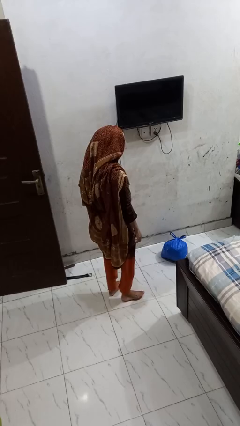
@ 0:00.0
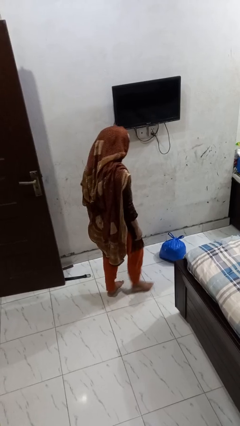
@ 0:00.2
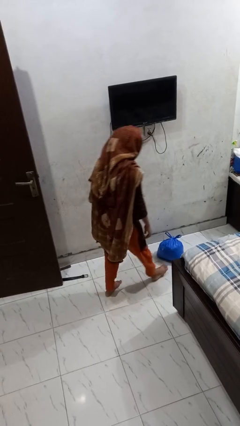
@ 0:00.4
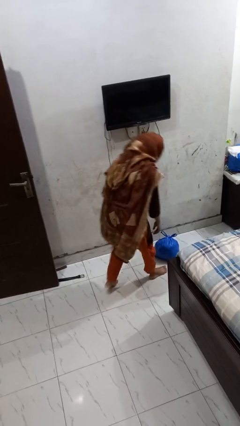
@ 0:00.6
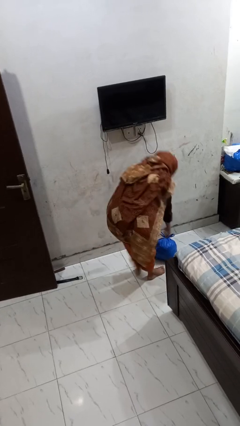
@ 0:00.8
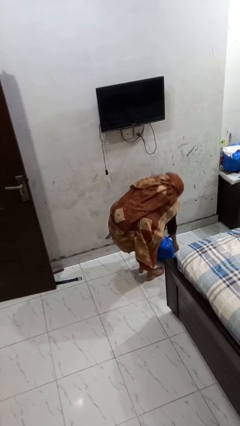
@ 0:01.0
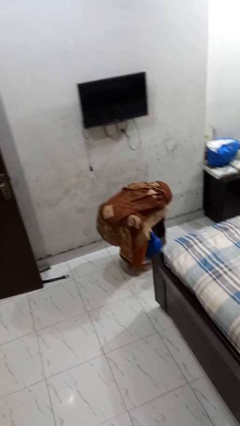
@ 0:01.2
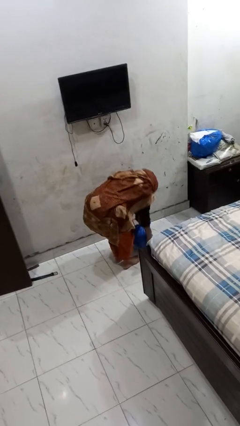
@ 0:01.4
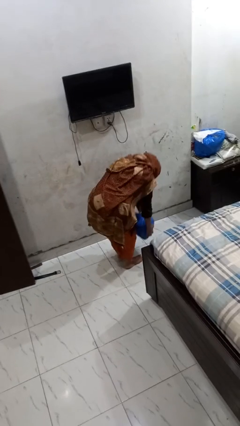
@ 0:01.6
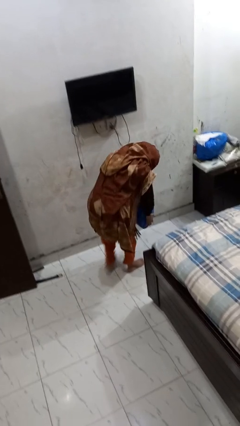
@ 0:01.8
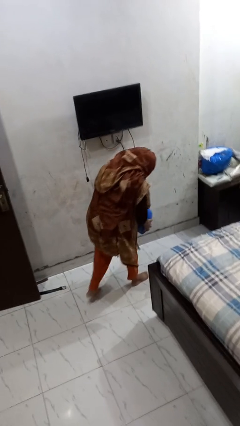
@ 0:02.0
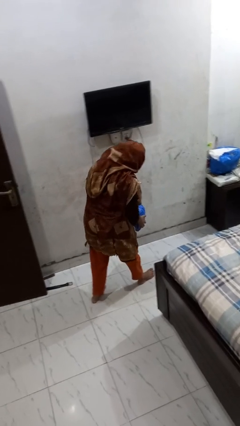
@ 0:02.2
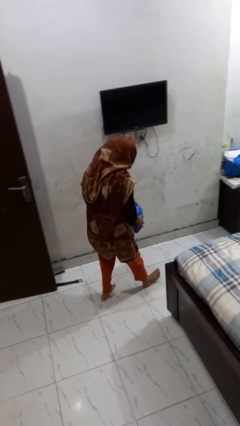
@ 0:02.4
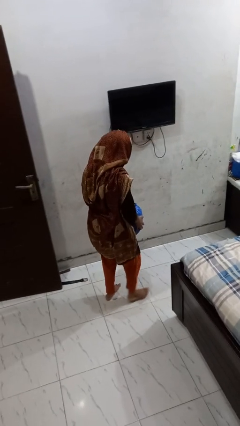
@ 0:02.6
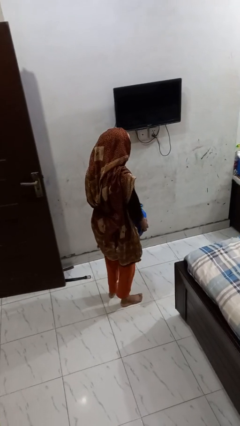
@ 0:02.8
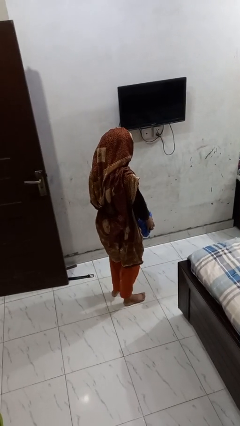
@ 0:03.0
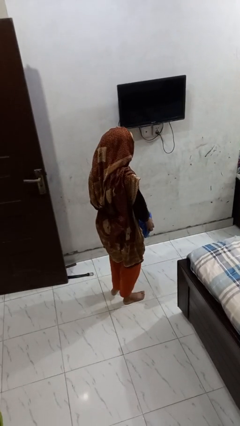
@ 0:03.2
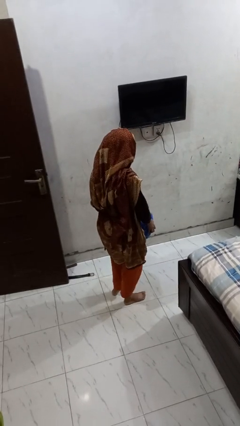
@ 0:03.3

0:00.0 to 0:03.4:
person picks up object from floor

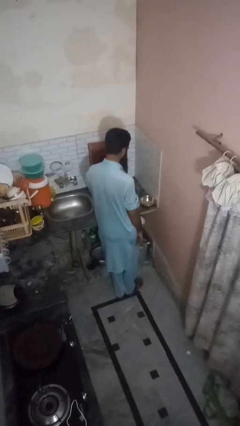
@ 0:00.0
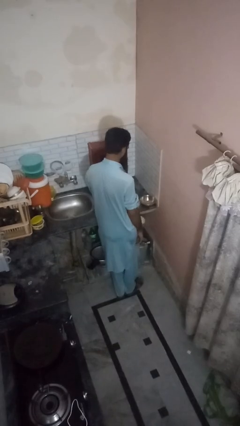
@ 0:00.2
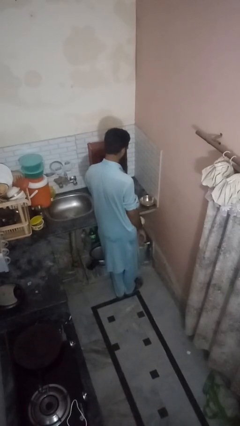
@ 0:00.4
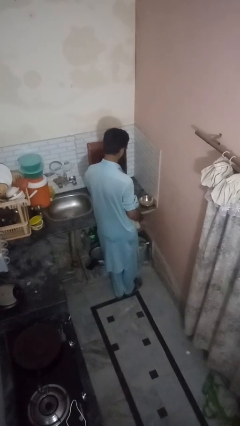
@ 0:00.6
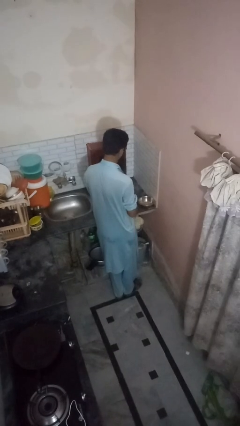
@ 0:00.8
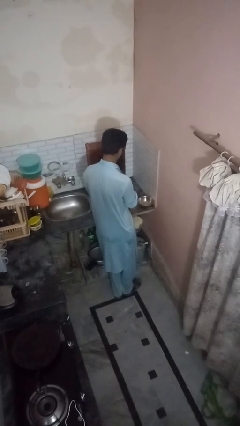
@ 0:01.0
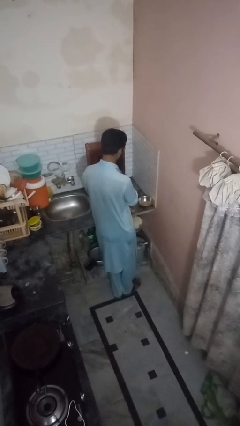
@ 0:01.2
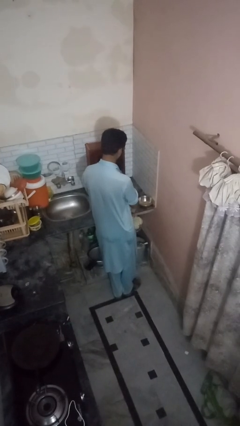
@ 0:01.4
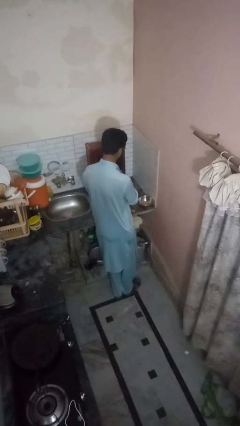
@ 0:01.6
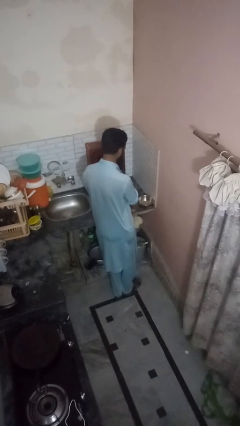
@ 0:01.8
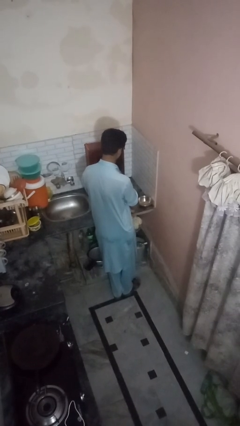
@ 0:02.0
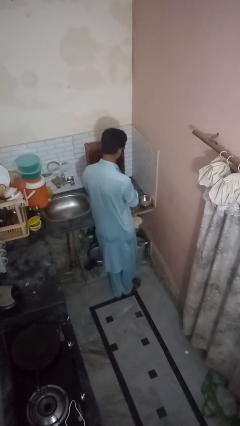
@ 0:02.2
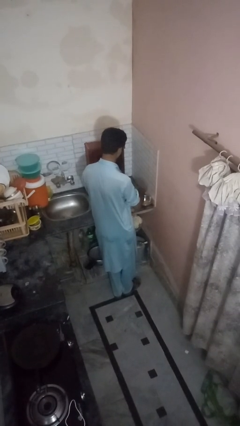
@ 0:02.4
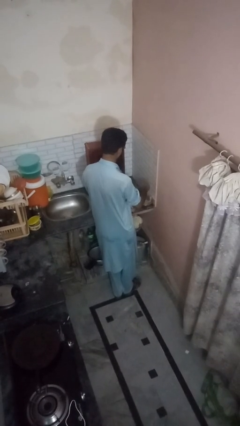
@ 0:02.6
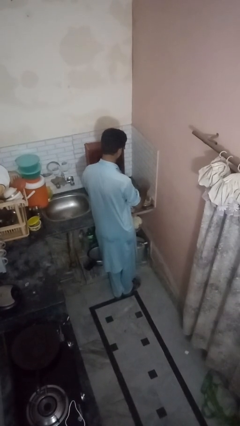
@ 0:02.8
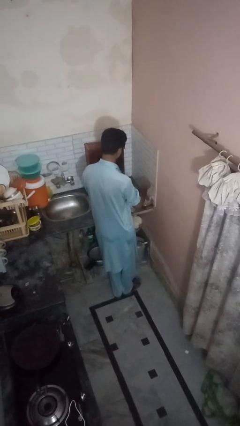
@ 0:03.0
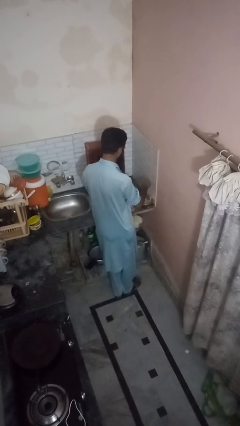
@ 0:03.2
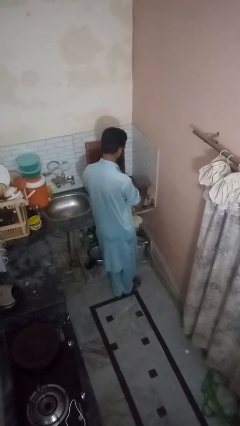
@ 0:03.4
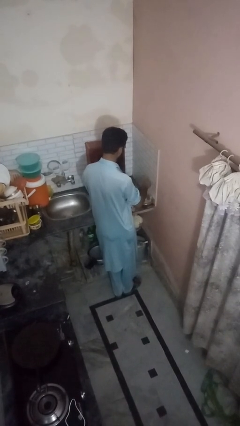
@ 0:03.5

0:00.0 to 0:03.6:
person pours into bowl

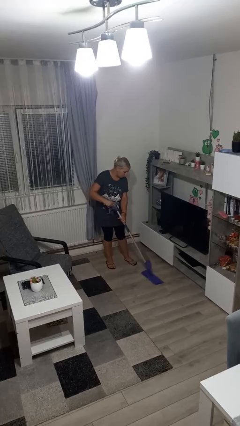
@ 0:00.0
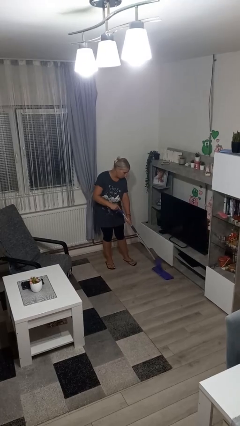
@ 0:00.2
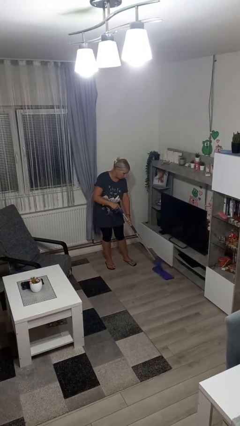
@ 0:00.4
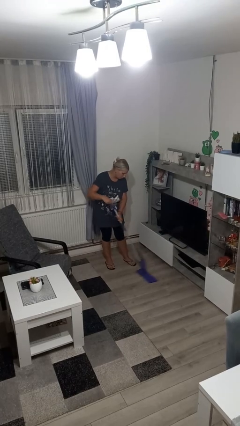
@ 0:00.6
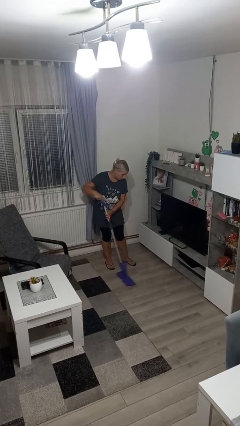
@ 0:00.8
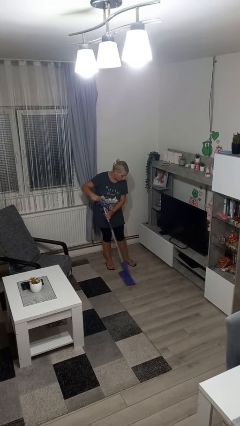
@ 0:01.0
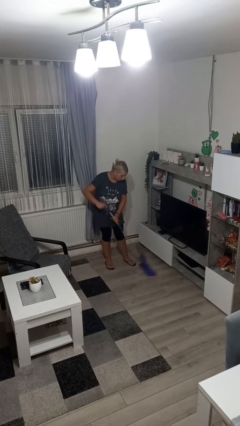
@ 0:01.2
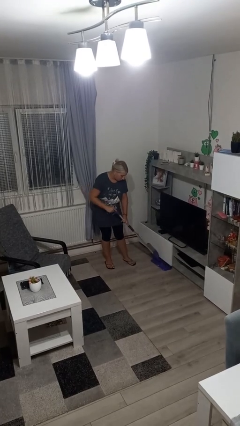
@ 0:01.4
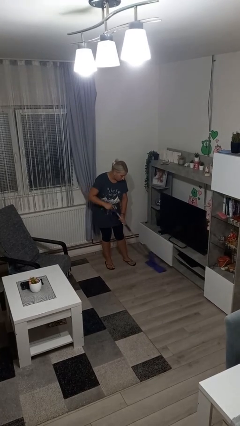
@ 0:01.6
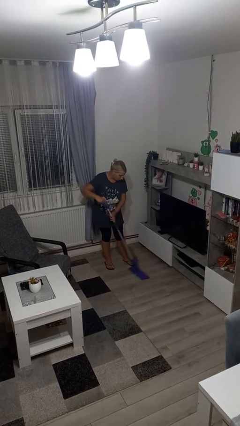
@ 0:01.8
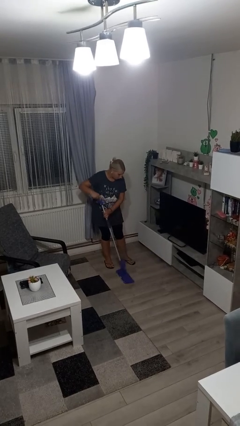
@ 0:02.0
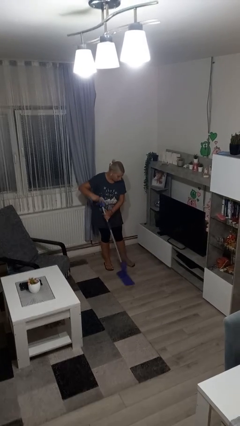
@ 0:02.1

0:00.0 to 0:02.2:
person mops

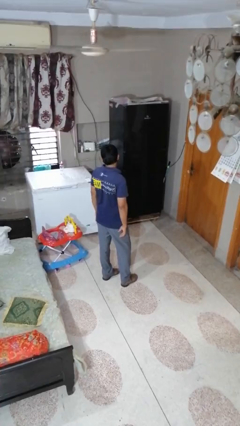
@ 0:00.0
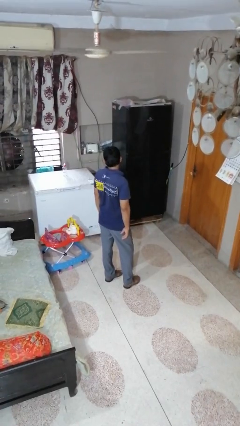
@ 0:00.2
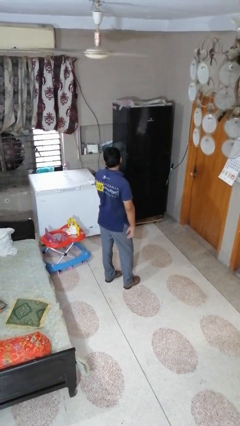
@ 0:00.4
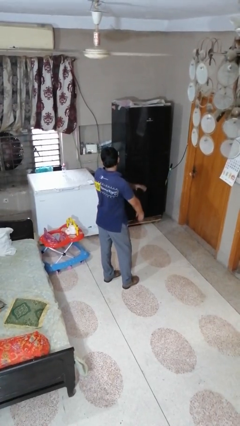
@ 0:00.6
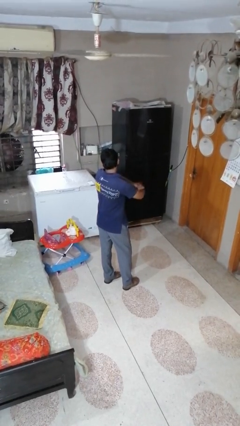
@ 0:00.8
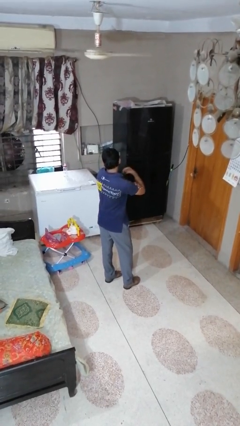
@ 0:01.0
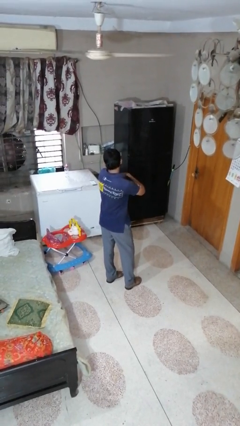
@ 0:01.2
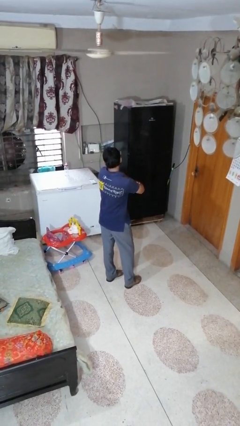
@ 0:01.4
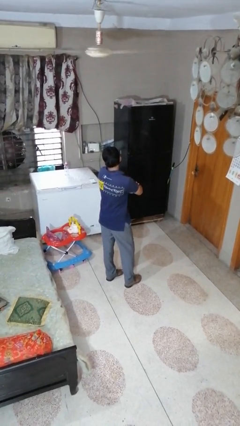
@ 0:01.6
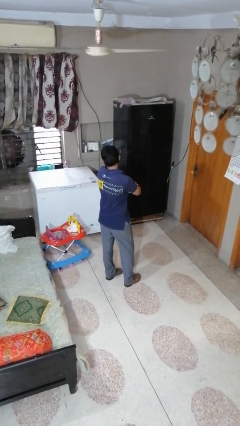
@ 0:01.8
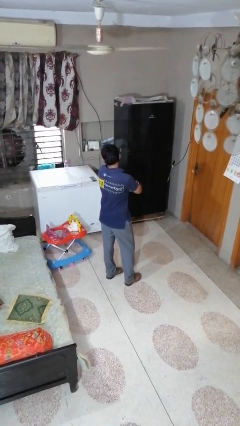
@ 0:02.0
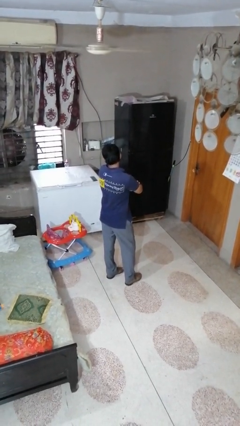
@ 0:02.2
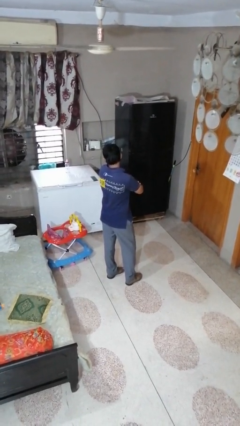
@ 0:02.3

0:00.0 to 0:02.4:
person crosses arms

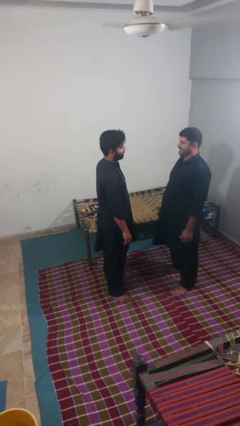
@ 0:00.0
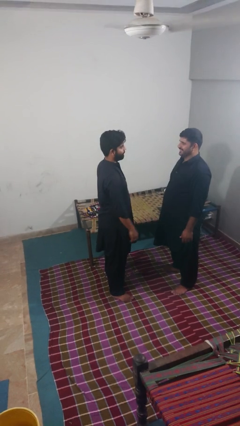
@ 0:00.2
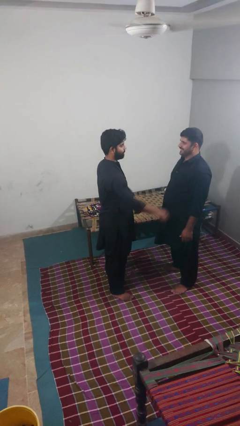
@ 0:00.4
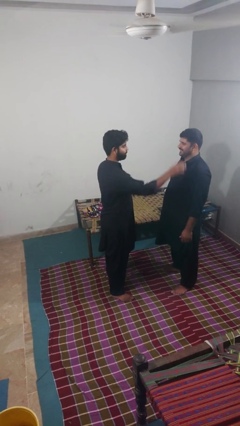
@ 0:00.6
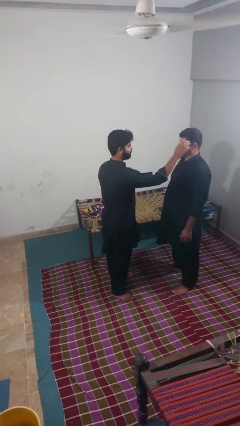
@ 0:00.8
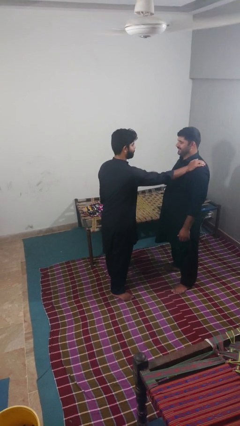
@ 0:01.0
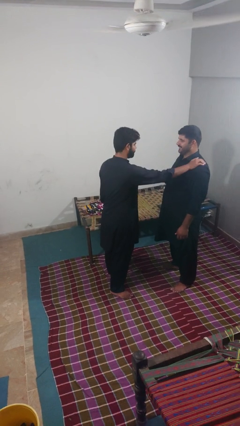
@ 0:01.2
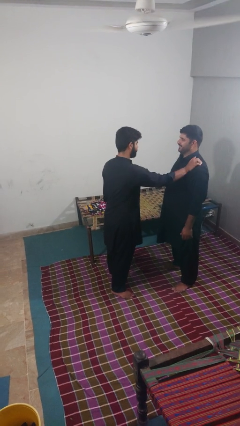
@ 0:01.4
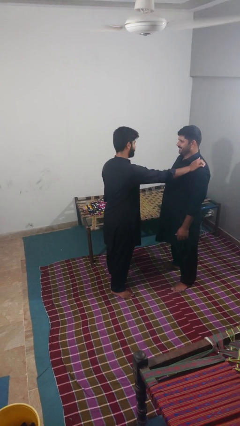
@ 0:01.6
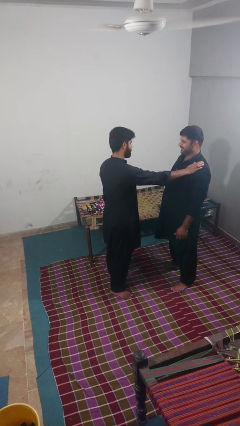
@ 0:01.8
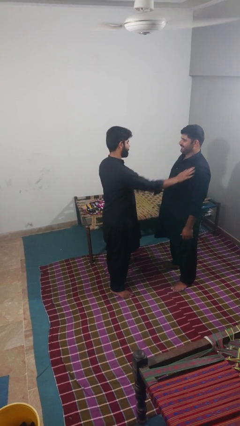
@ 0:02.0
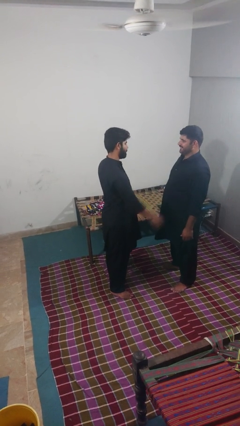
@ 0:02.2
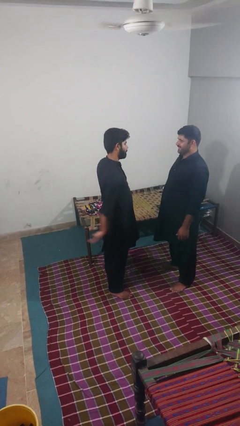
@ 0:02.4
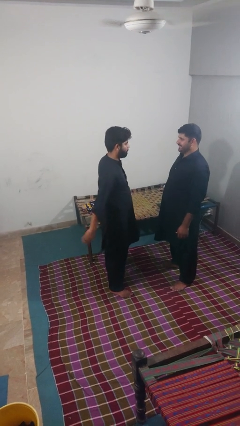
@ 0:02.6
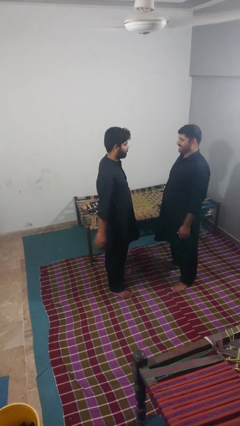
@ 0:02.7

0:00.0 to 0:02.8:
person pounds shoulders of person

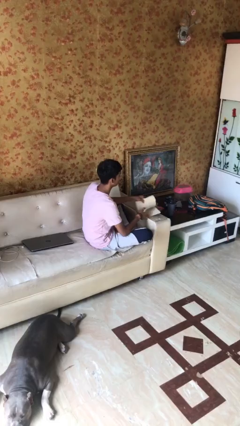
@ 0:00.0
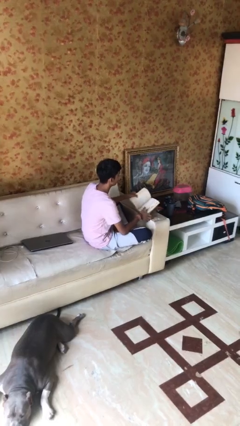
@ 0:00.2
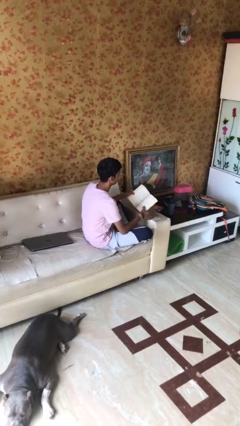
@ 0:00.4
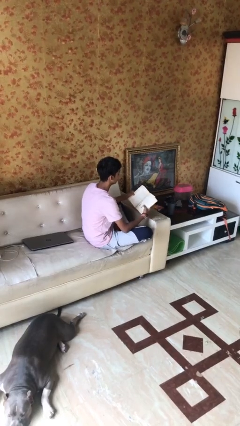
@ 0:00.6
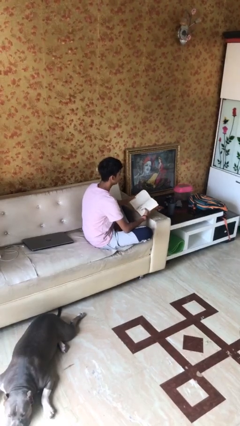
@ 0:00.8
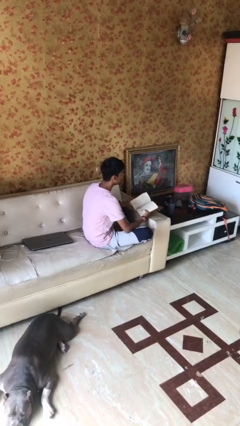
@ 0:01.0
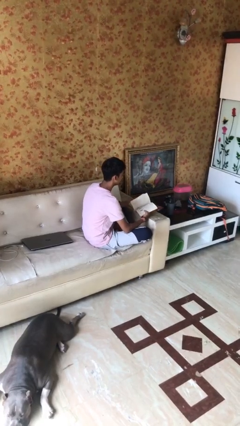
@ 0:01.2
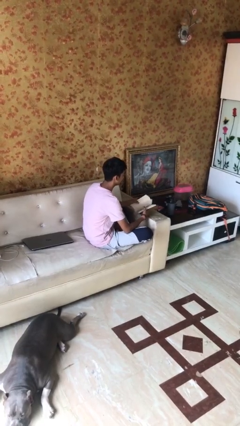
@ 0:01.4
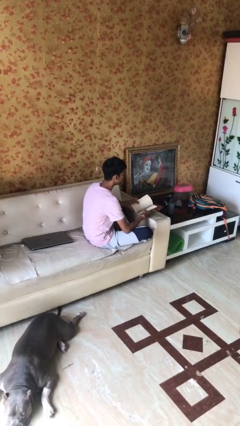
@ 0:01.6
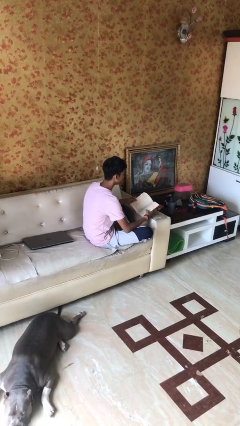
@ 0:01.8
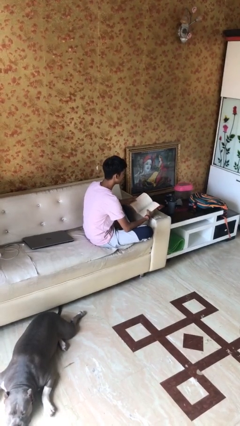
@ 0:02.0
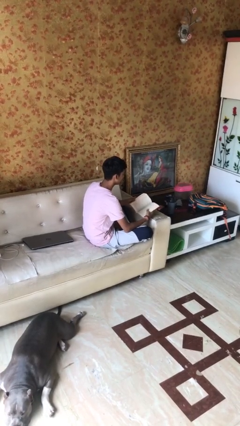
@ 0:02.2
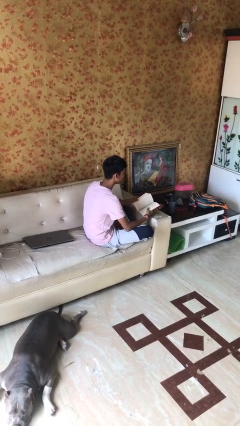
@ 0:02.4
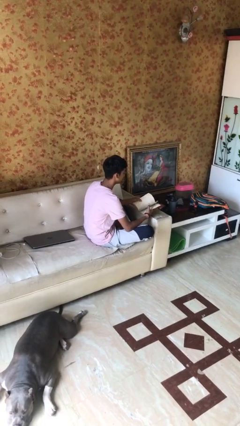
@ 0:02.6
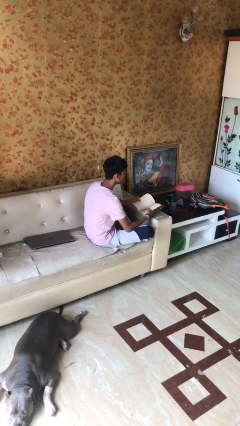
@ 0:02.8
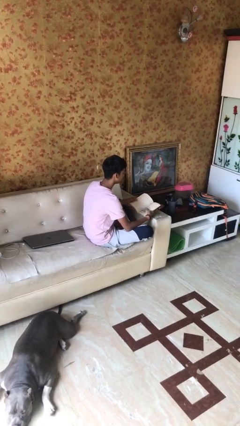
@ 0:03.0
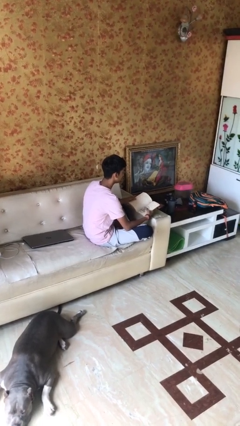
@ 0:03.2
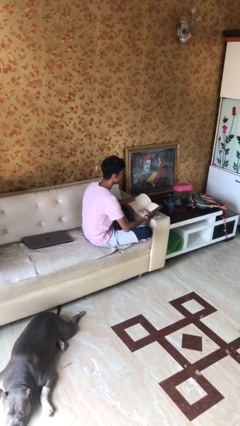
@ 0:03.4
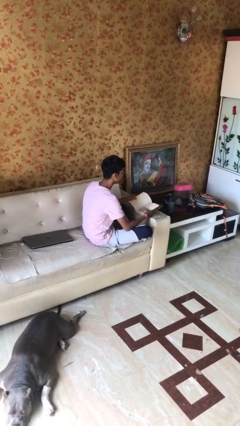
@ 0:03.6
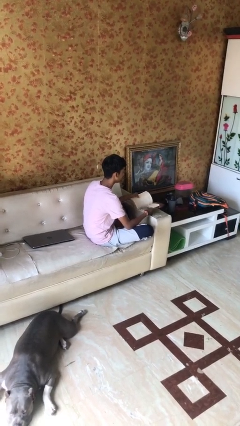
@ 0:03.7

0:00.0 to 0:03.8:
person reads book
